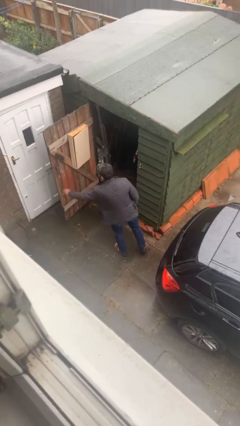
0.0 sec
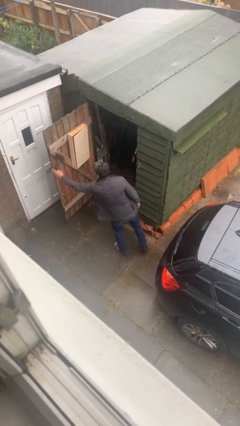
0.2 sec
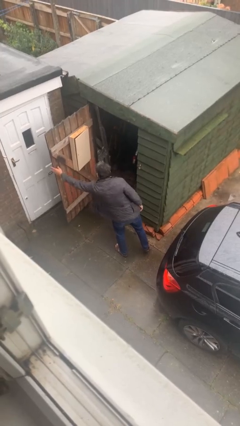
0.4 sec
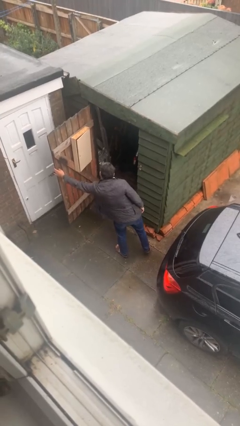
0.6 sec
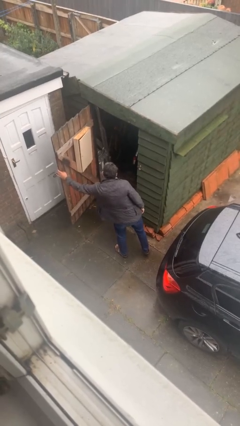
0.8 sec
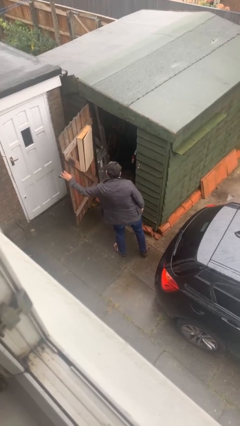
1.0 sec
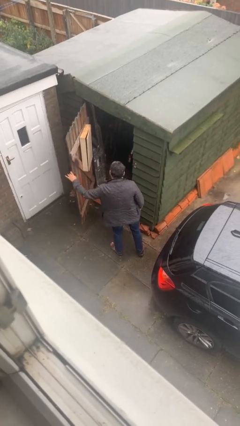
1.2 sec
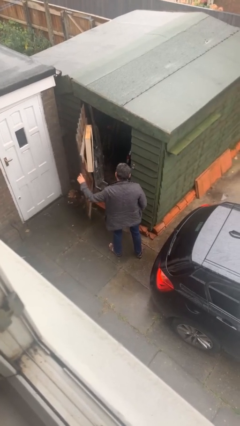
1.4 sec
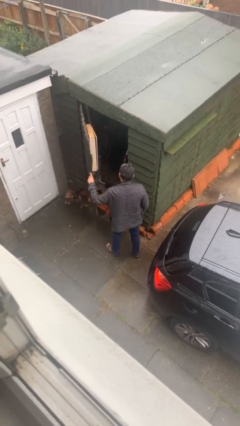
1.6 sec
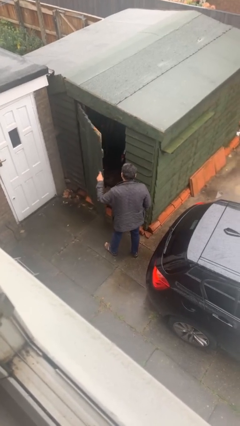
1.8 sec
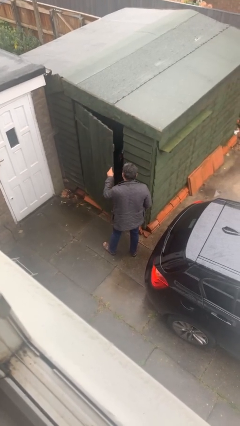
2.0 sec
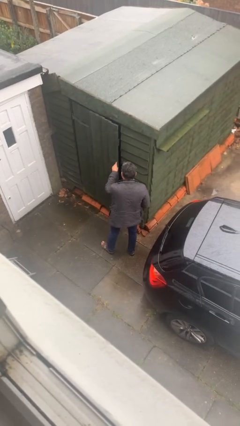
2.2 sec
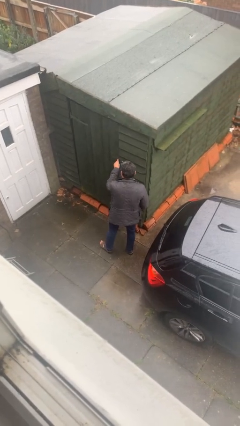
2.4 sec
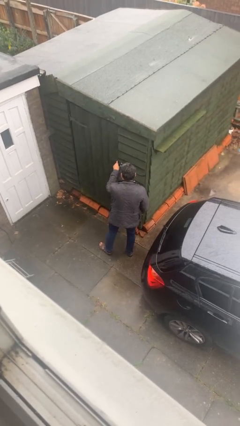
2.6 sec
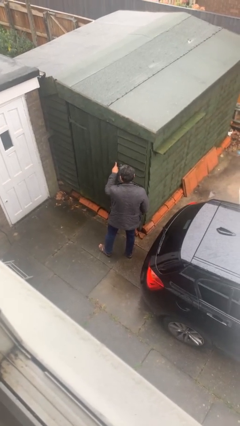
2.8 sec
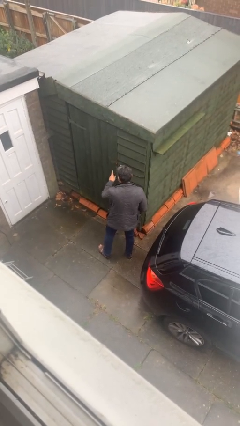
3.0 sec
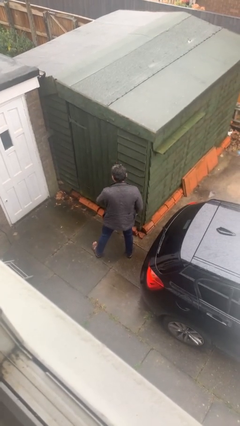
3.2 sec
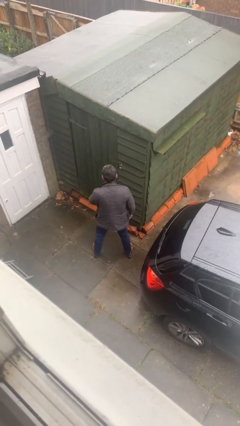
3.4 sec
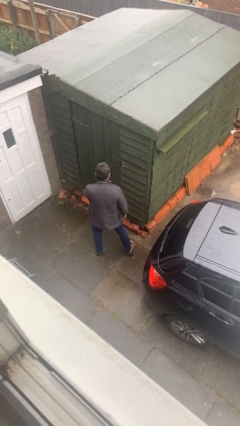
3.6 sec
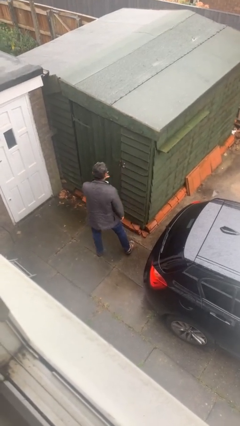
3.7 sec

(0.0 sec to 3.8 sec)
person closes facility door

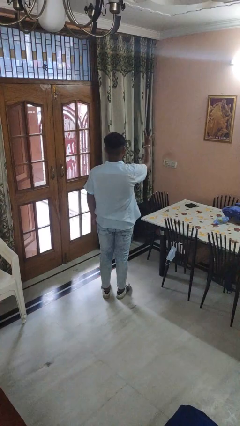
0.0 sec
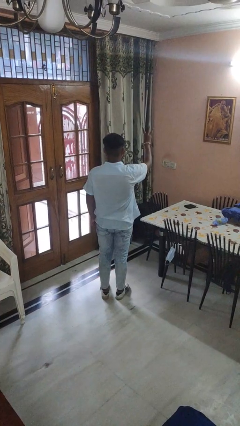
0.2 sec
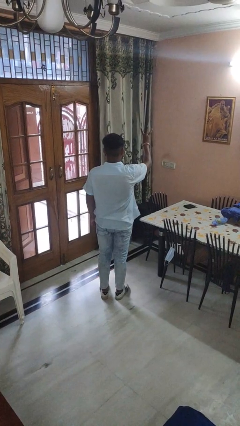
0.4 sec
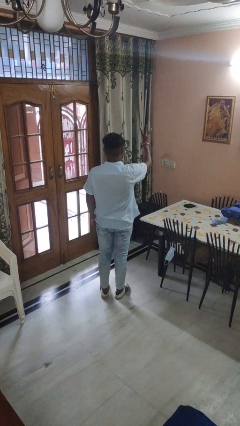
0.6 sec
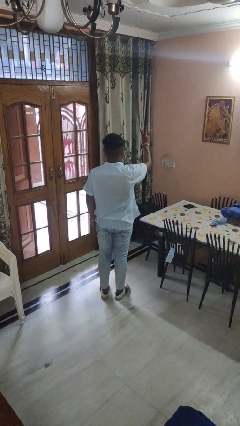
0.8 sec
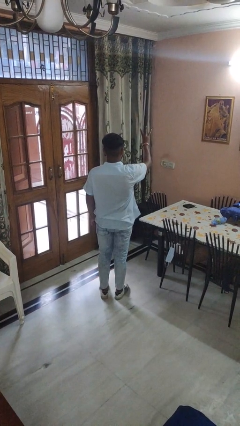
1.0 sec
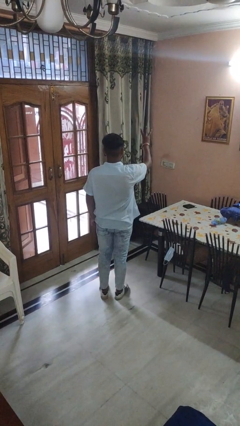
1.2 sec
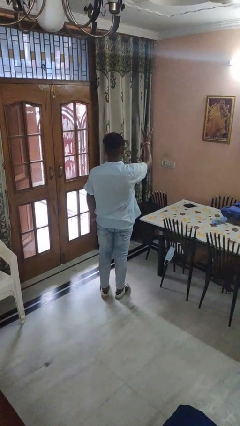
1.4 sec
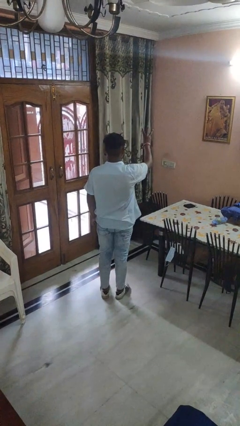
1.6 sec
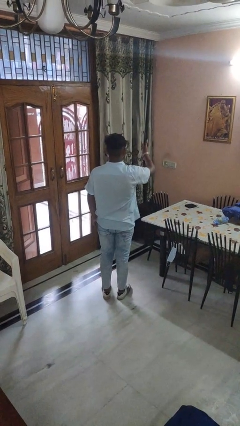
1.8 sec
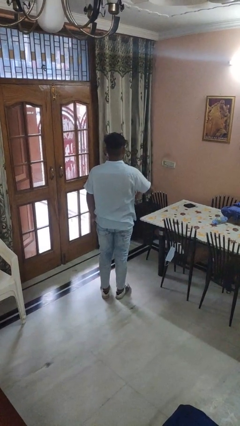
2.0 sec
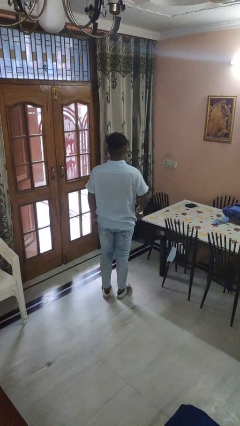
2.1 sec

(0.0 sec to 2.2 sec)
person gestures number three

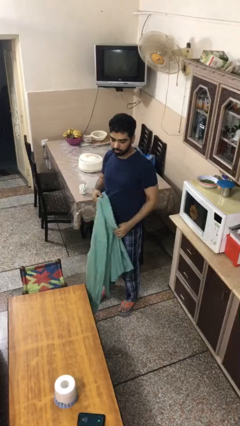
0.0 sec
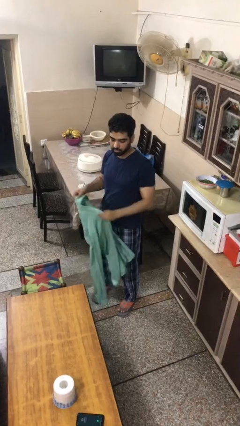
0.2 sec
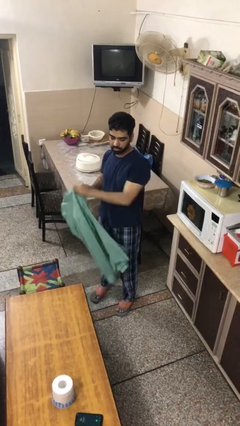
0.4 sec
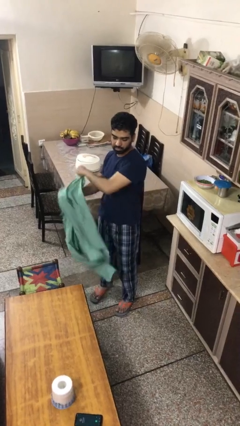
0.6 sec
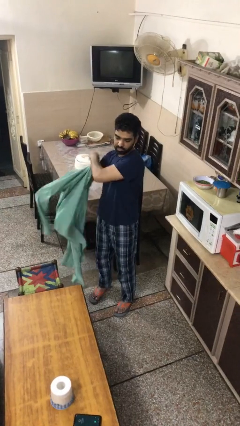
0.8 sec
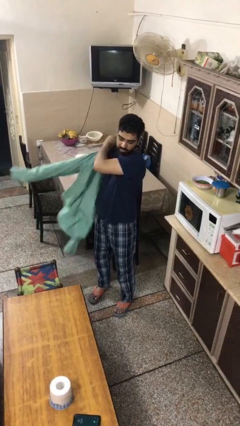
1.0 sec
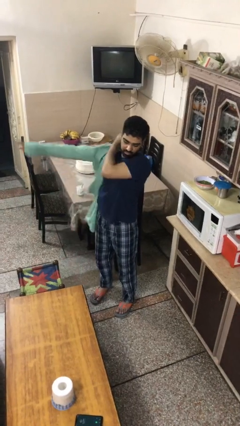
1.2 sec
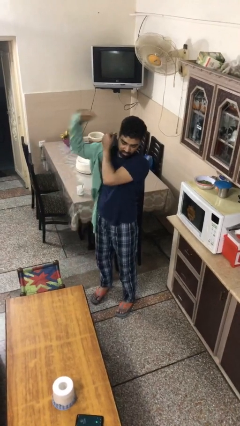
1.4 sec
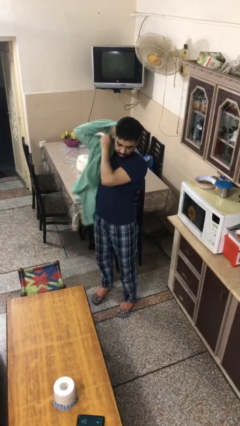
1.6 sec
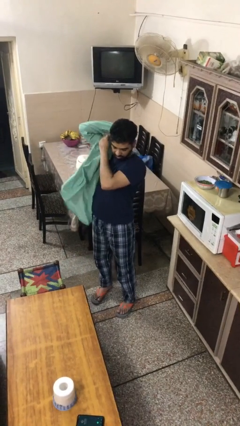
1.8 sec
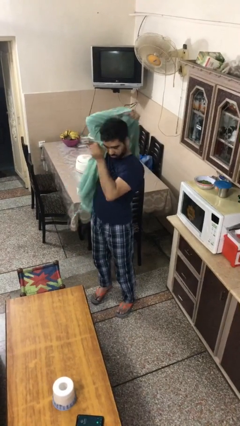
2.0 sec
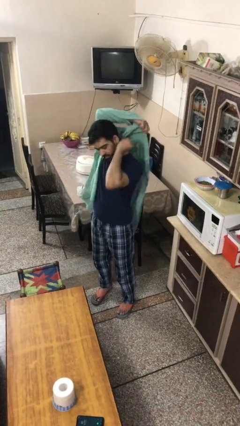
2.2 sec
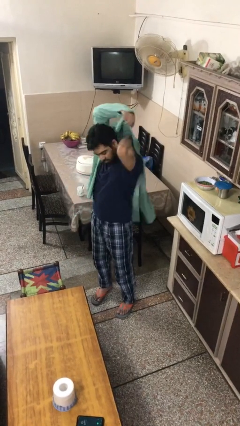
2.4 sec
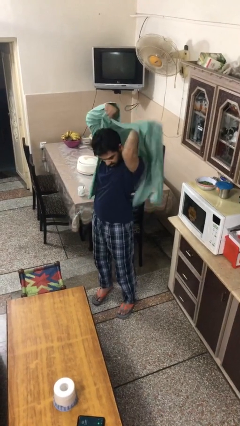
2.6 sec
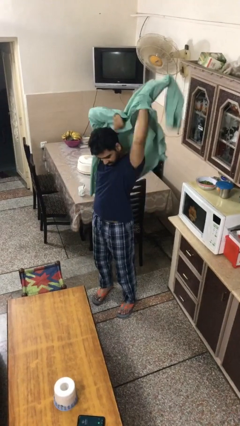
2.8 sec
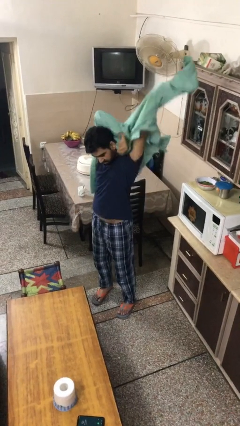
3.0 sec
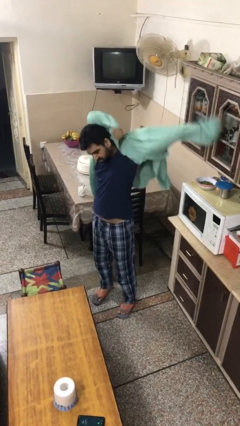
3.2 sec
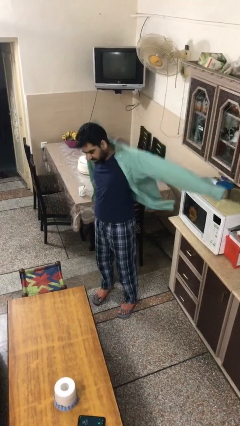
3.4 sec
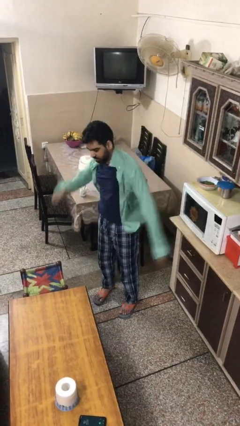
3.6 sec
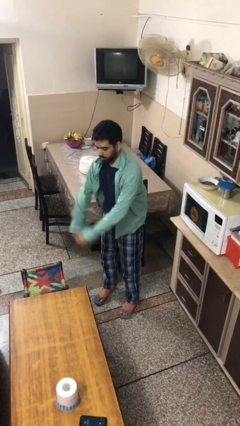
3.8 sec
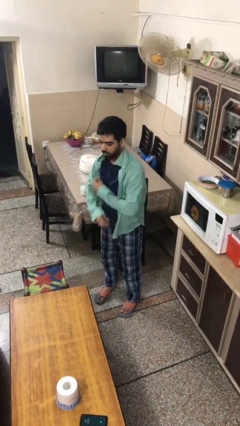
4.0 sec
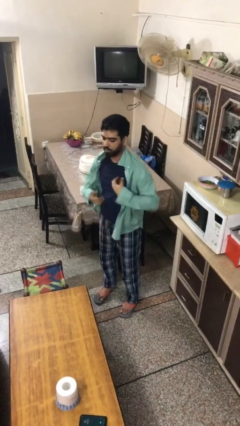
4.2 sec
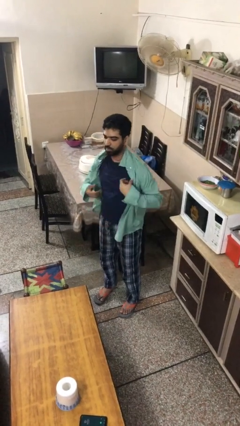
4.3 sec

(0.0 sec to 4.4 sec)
person puts on shirt

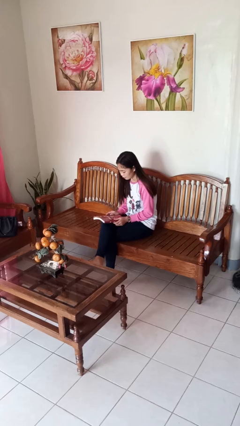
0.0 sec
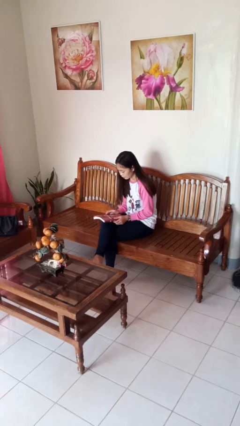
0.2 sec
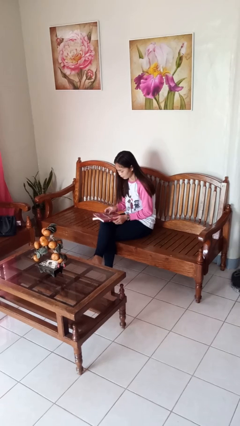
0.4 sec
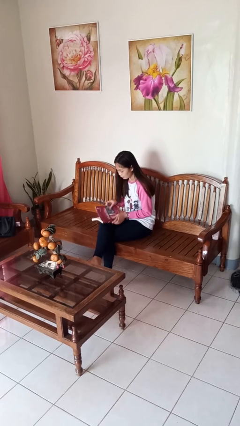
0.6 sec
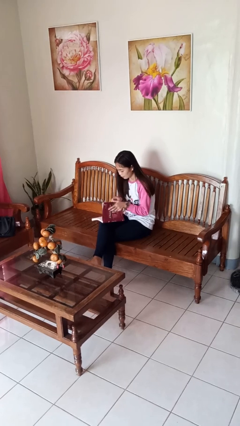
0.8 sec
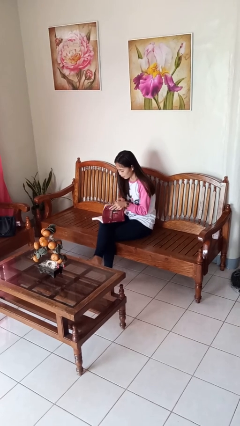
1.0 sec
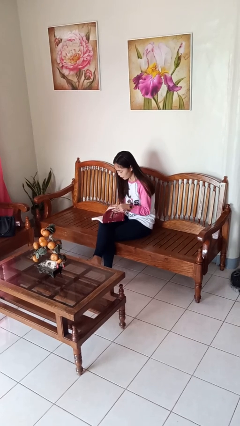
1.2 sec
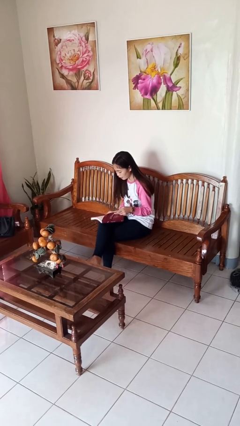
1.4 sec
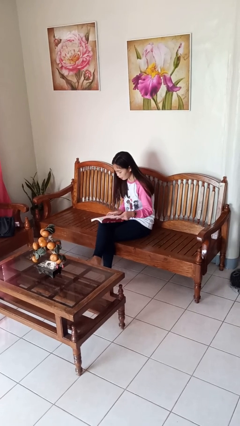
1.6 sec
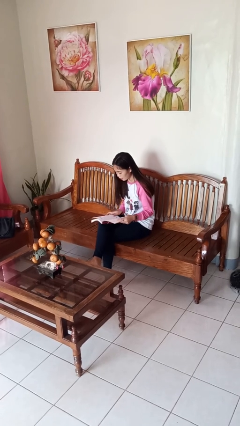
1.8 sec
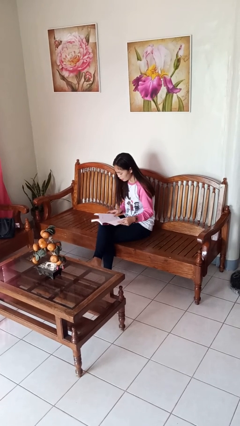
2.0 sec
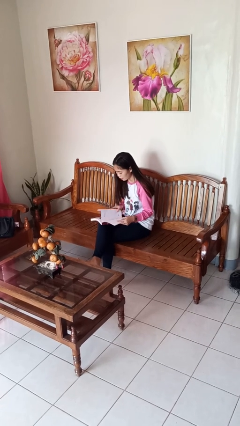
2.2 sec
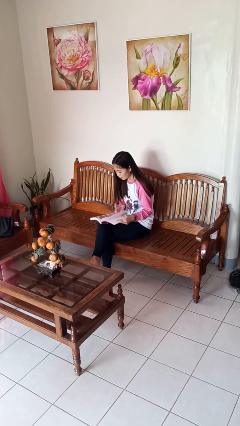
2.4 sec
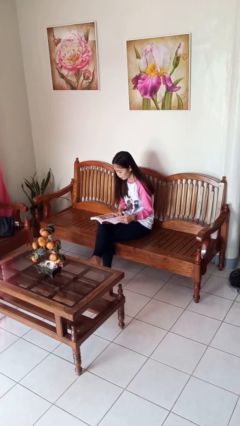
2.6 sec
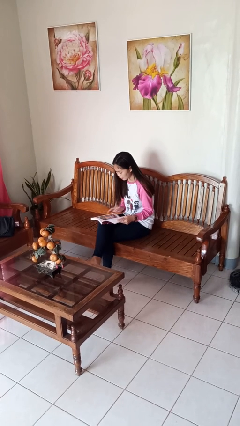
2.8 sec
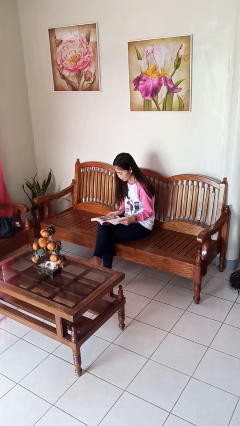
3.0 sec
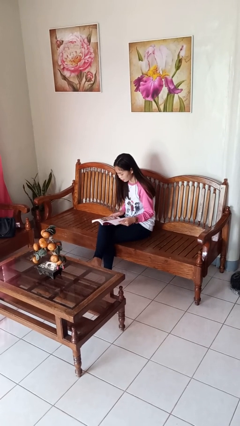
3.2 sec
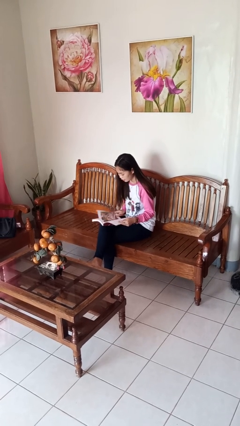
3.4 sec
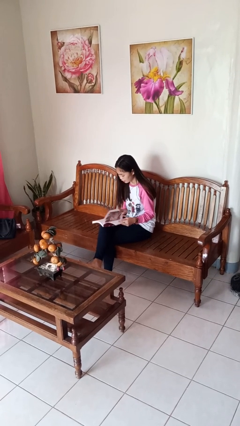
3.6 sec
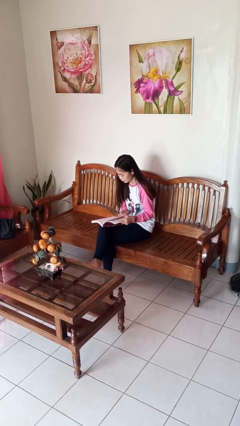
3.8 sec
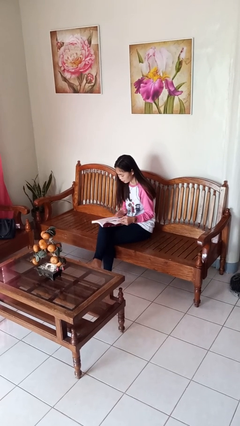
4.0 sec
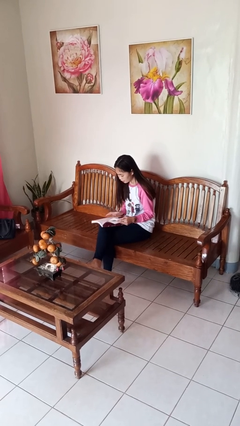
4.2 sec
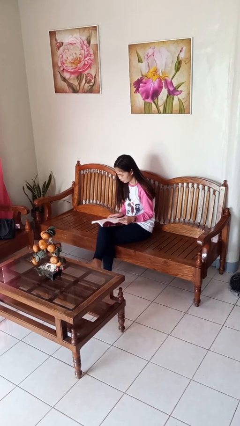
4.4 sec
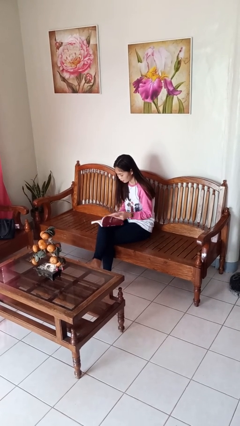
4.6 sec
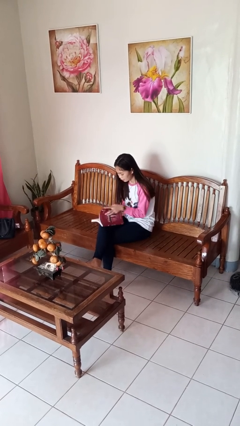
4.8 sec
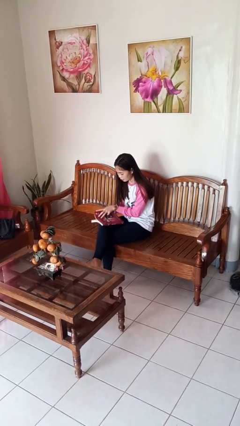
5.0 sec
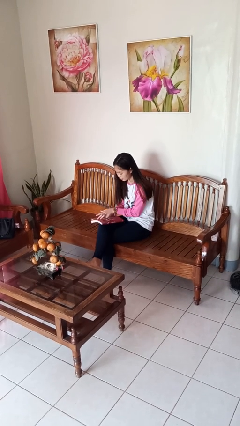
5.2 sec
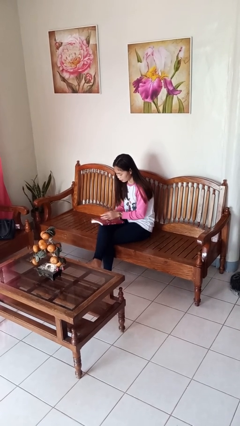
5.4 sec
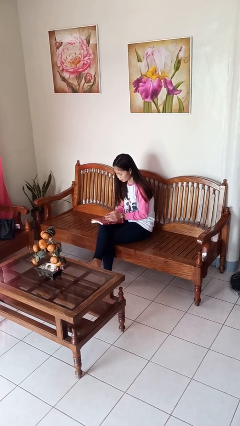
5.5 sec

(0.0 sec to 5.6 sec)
person reads book

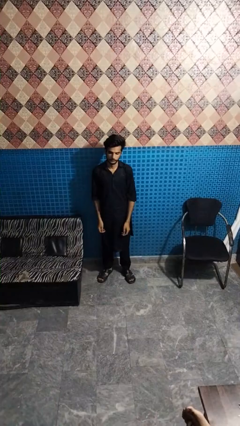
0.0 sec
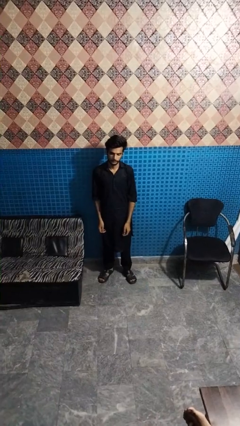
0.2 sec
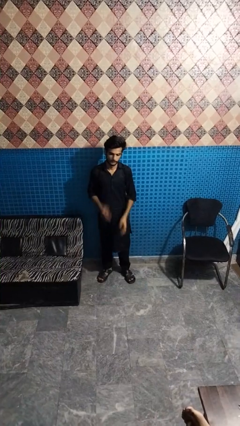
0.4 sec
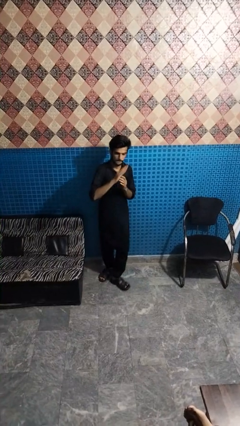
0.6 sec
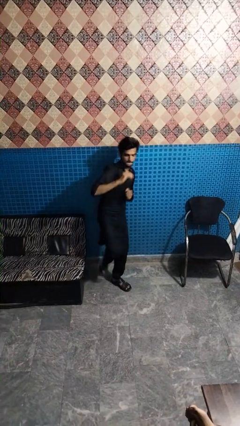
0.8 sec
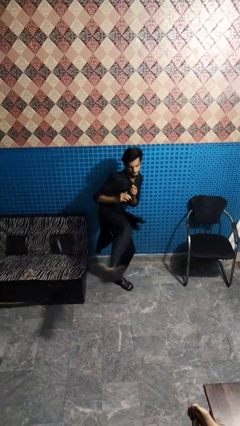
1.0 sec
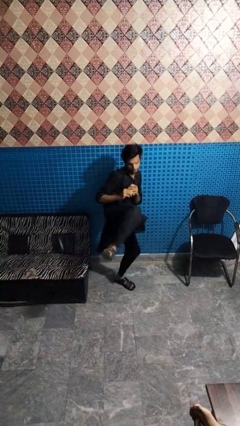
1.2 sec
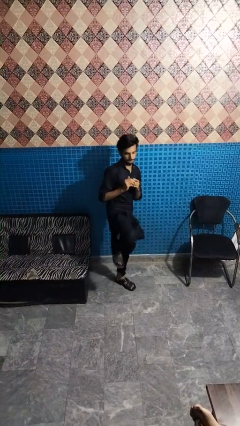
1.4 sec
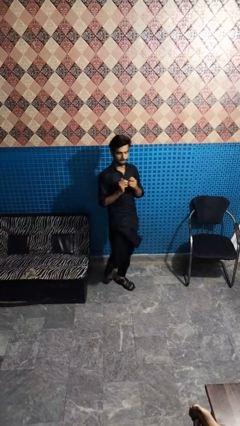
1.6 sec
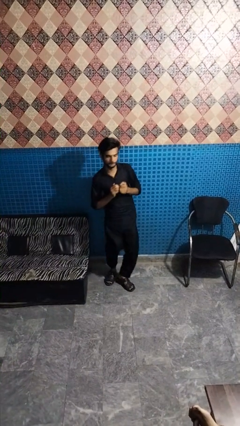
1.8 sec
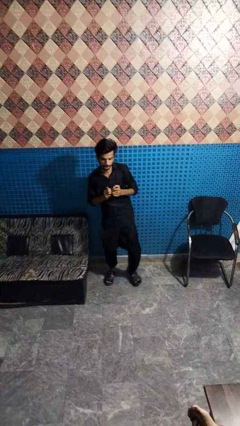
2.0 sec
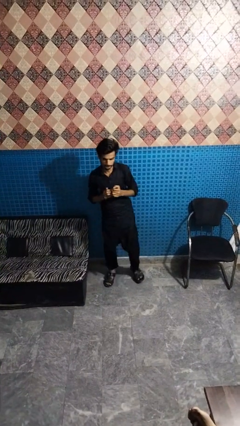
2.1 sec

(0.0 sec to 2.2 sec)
person karate kicks
